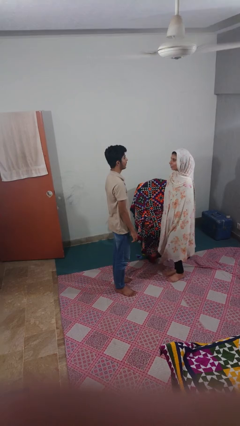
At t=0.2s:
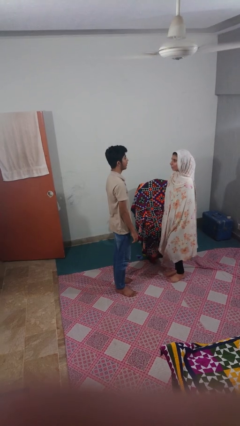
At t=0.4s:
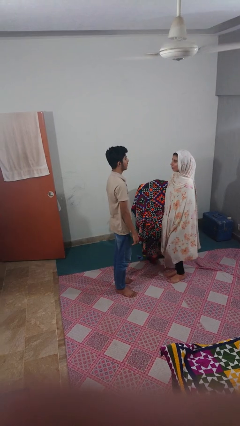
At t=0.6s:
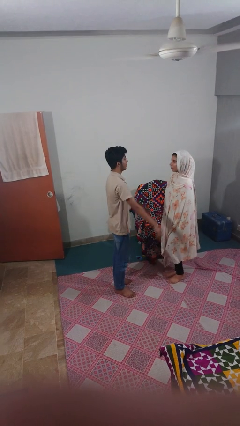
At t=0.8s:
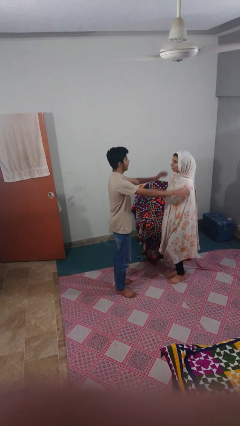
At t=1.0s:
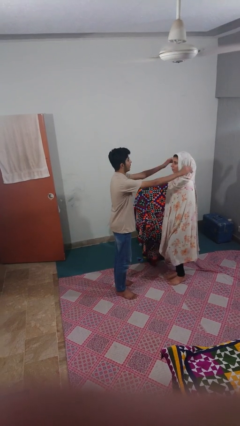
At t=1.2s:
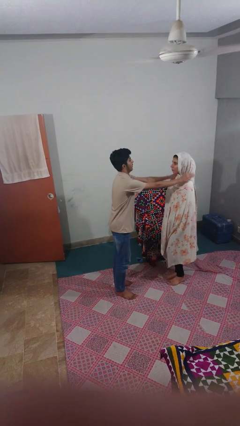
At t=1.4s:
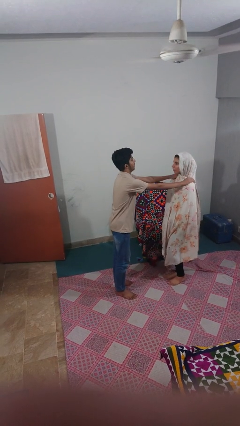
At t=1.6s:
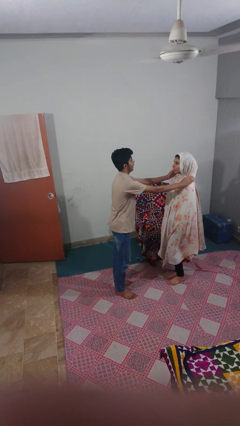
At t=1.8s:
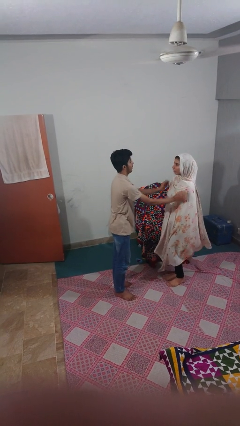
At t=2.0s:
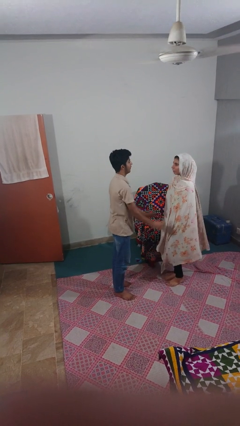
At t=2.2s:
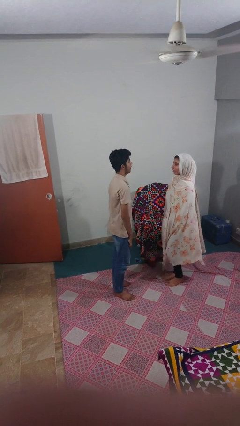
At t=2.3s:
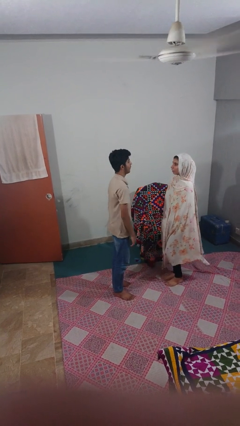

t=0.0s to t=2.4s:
person pounds shoulders of person

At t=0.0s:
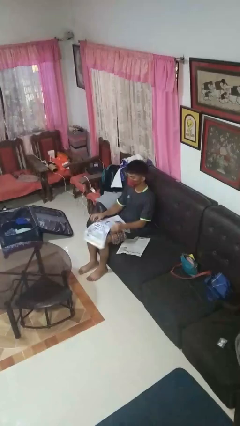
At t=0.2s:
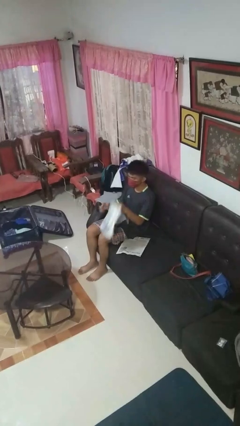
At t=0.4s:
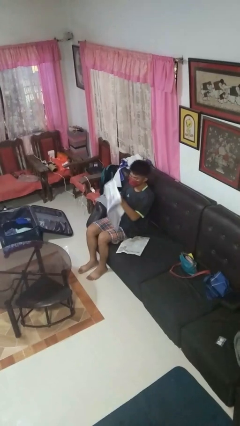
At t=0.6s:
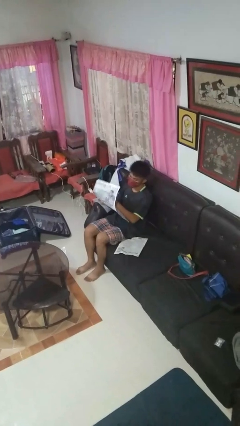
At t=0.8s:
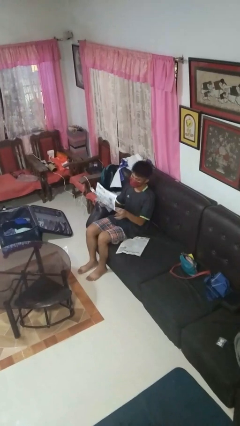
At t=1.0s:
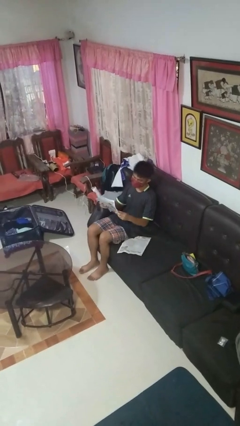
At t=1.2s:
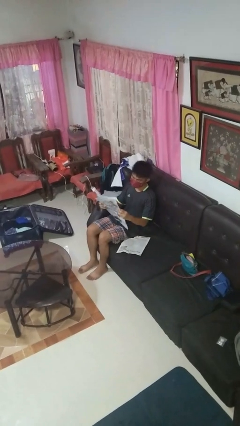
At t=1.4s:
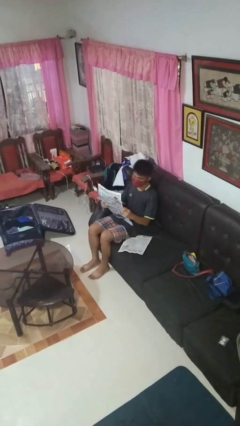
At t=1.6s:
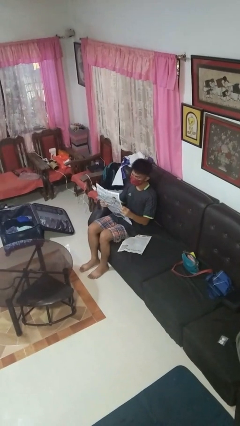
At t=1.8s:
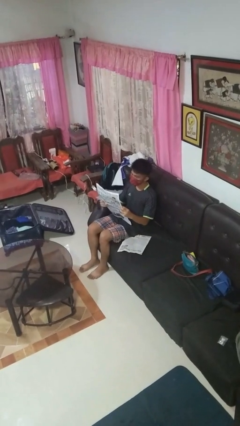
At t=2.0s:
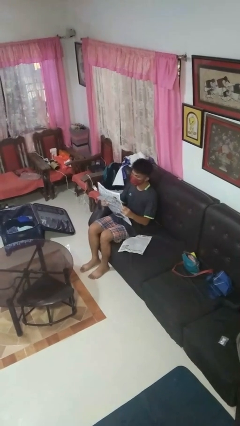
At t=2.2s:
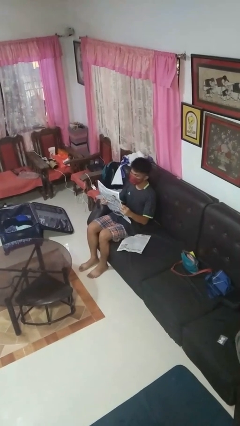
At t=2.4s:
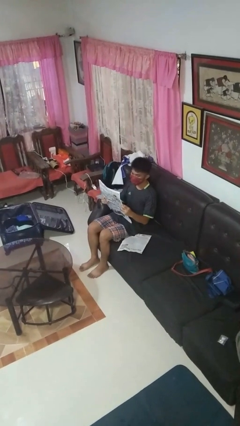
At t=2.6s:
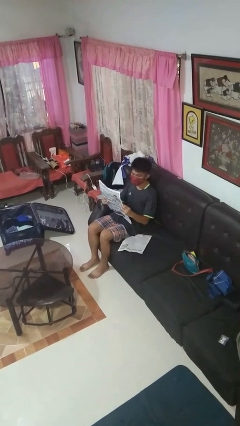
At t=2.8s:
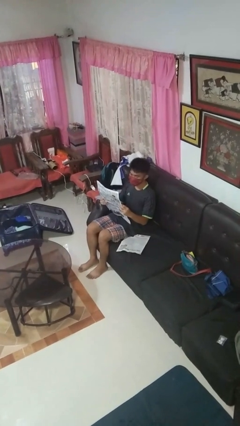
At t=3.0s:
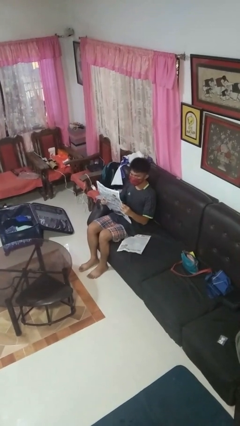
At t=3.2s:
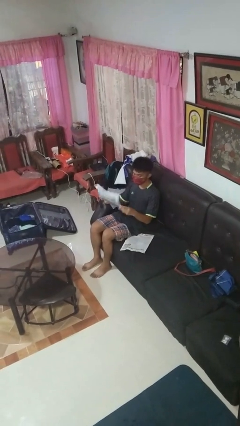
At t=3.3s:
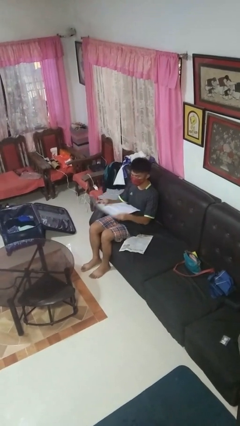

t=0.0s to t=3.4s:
person reads newspaper

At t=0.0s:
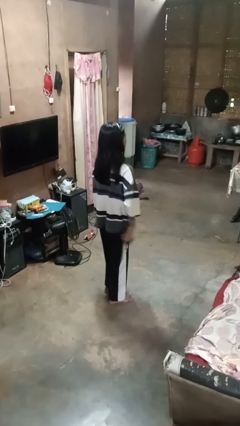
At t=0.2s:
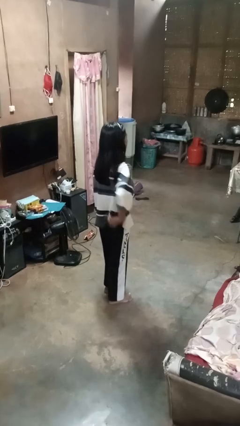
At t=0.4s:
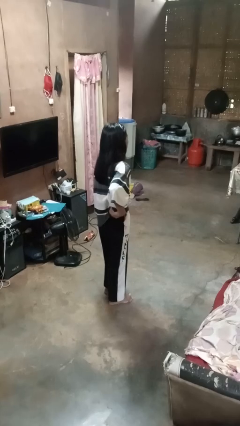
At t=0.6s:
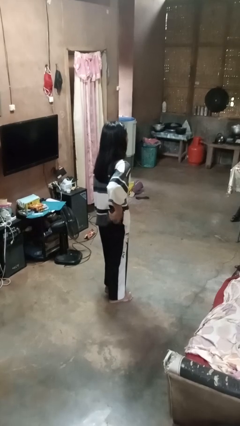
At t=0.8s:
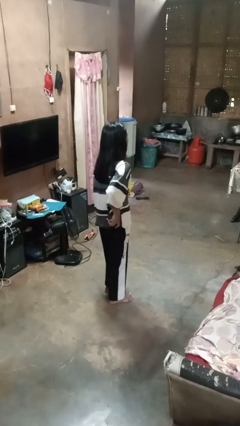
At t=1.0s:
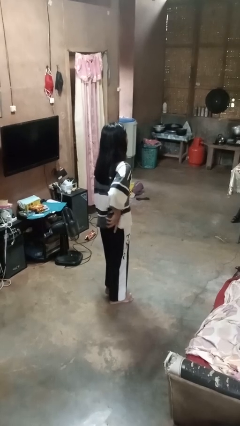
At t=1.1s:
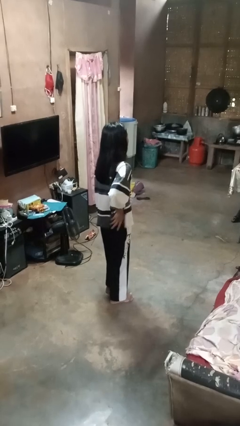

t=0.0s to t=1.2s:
person puts phone into pocket

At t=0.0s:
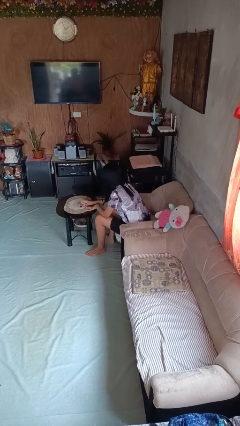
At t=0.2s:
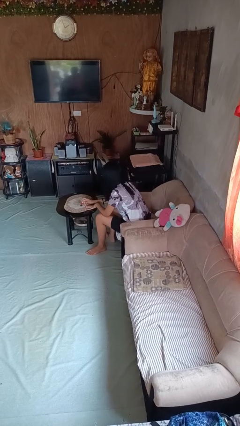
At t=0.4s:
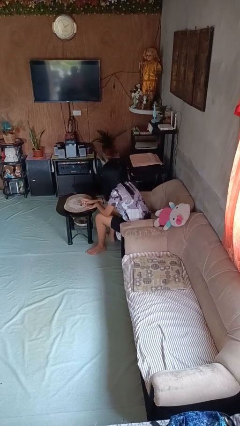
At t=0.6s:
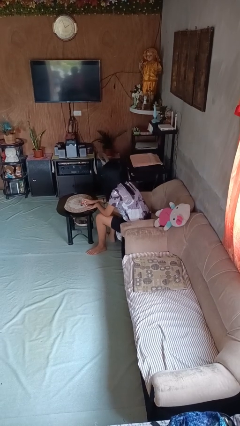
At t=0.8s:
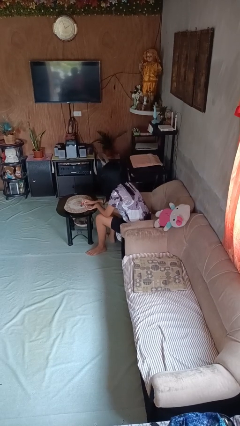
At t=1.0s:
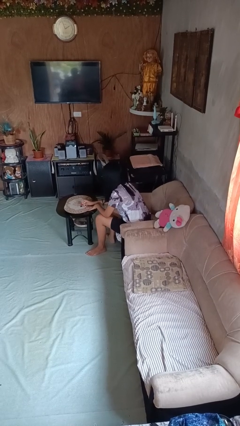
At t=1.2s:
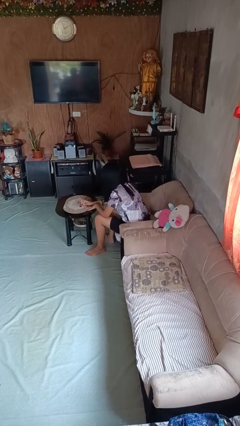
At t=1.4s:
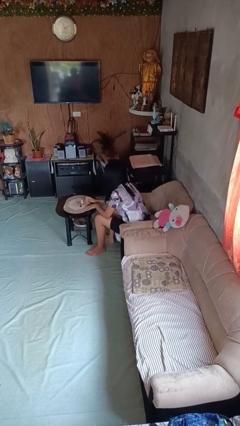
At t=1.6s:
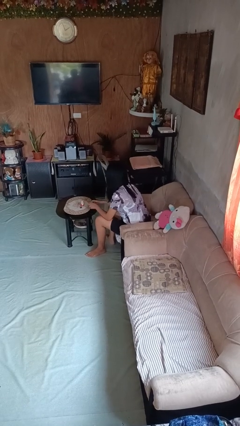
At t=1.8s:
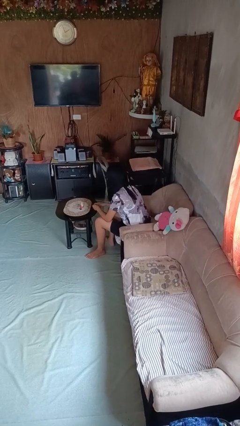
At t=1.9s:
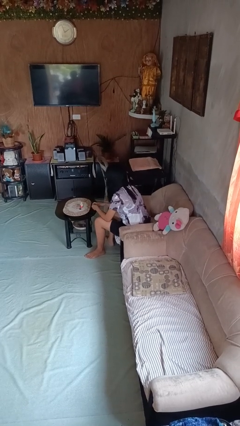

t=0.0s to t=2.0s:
person paints fingernails

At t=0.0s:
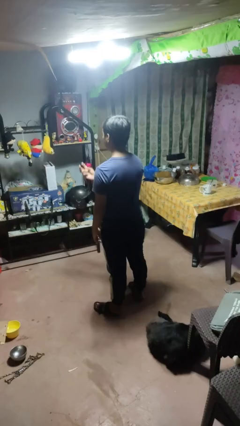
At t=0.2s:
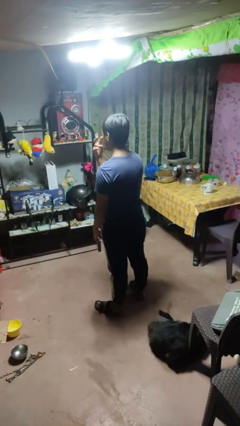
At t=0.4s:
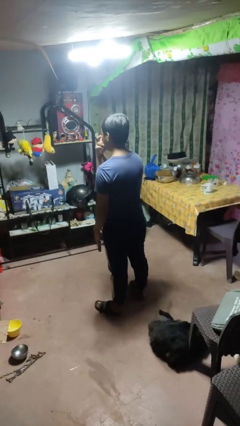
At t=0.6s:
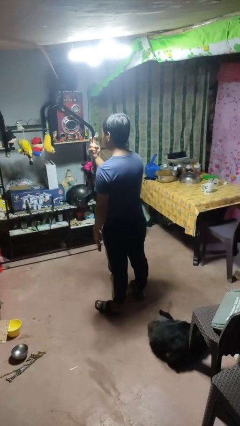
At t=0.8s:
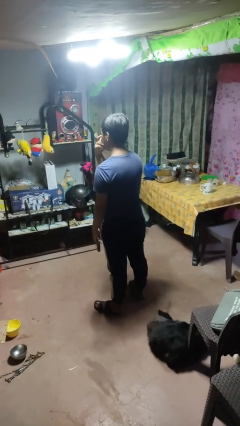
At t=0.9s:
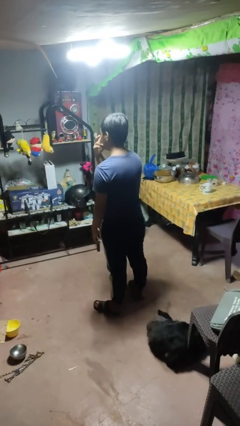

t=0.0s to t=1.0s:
person gestures watch closely

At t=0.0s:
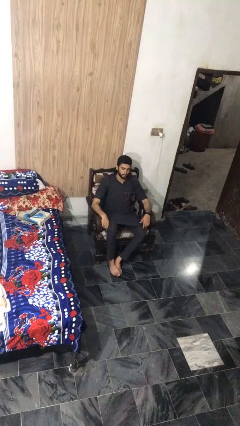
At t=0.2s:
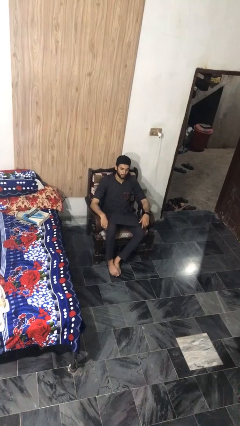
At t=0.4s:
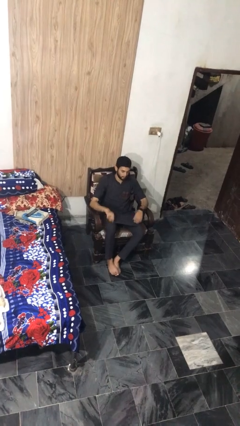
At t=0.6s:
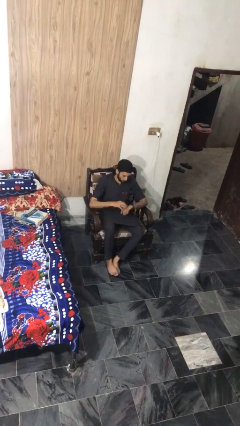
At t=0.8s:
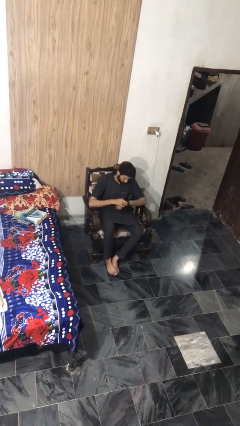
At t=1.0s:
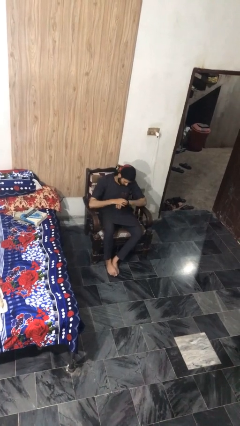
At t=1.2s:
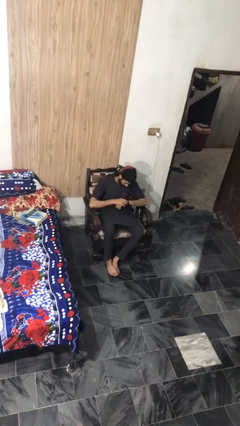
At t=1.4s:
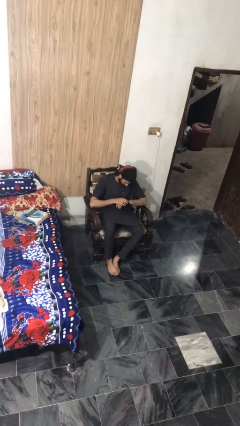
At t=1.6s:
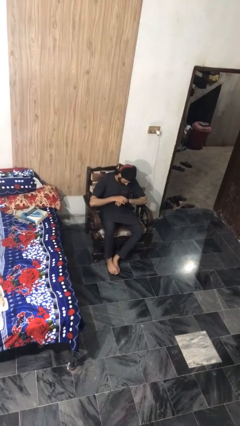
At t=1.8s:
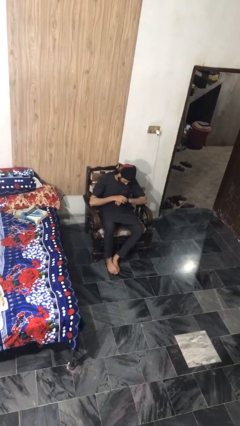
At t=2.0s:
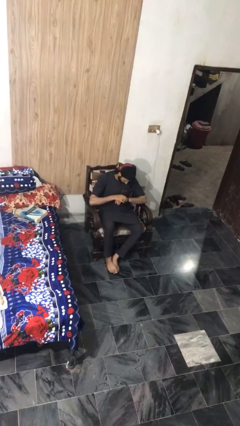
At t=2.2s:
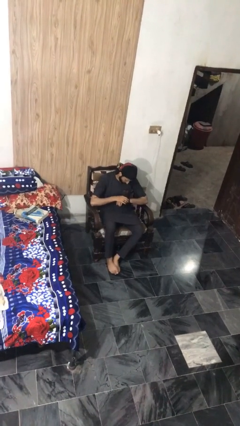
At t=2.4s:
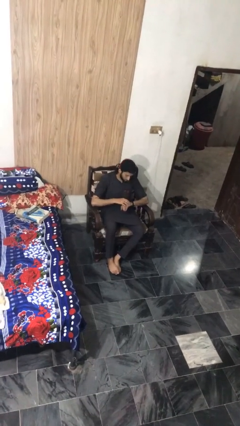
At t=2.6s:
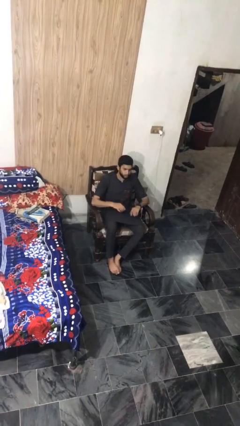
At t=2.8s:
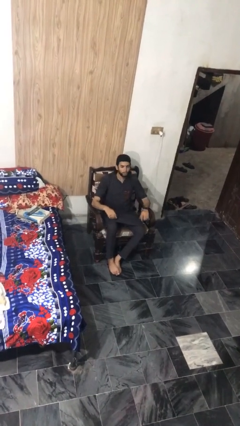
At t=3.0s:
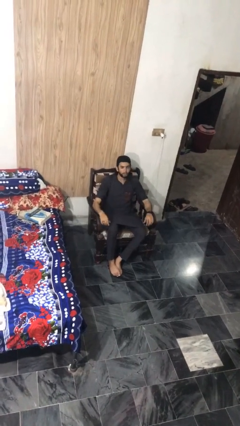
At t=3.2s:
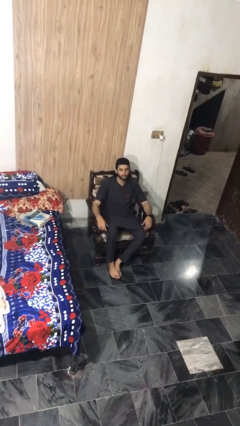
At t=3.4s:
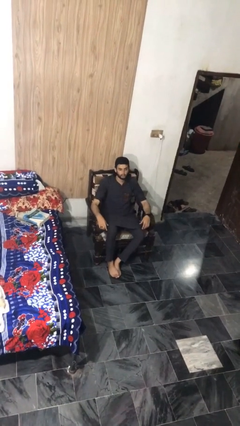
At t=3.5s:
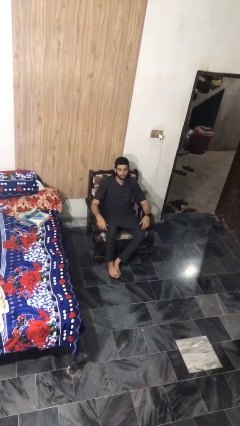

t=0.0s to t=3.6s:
person looks at wristwatch

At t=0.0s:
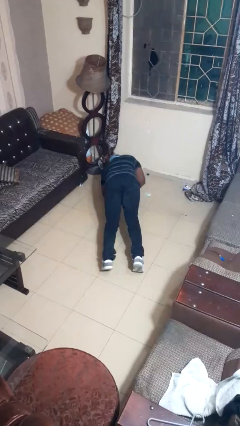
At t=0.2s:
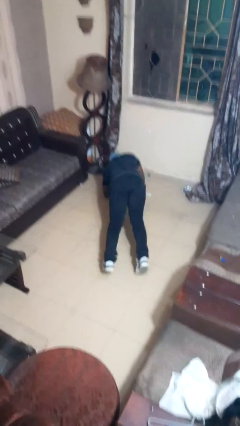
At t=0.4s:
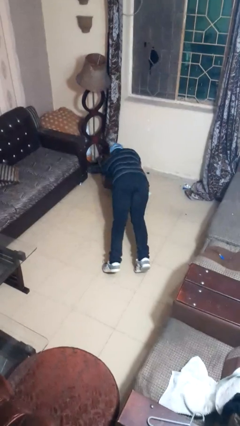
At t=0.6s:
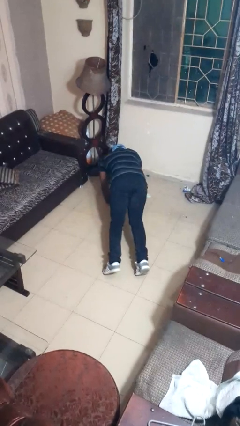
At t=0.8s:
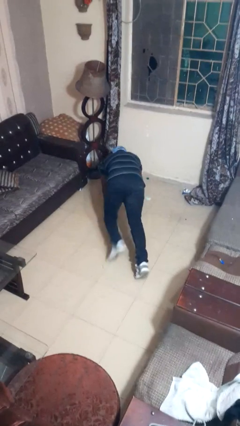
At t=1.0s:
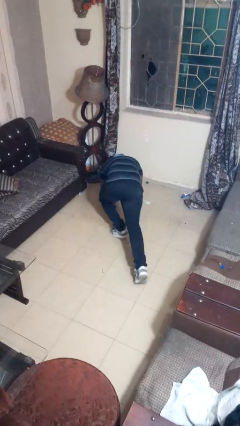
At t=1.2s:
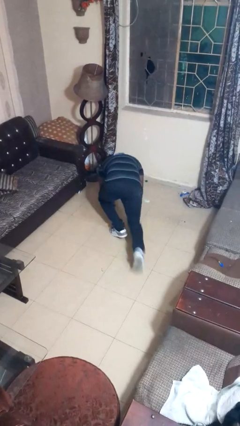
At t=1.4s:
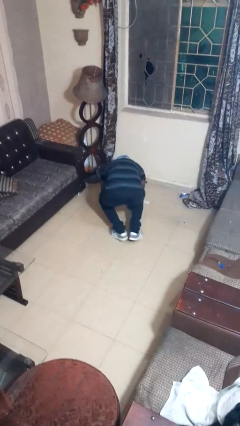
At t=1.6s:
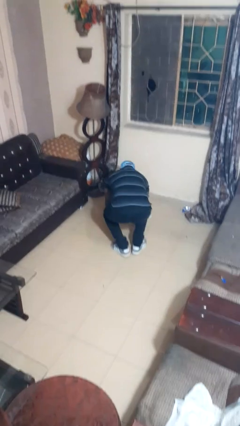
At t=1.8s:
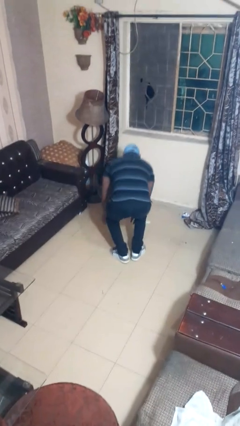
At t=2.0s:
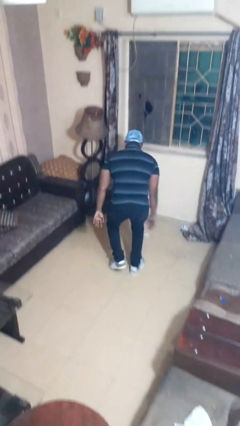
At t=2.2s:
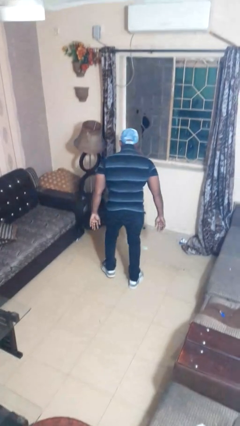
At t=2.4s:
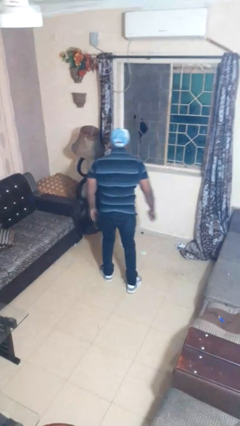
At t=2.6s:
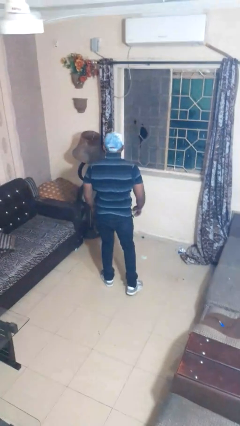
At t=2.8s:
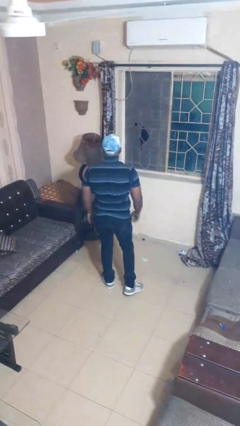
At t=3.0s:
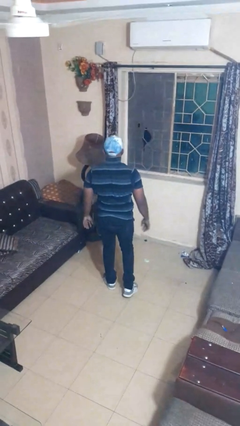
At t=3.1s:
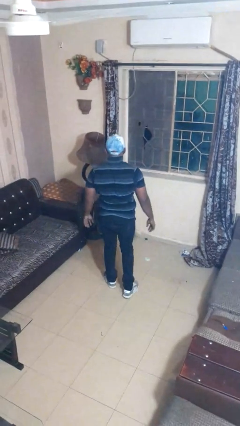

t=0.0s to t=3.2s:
person stands up from floor
